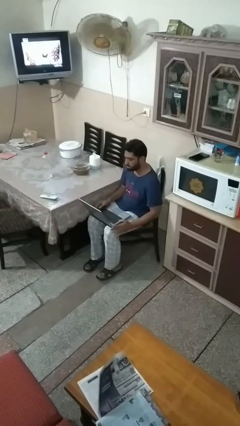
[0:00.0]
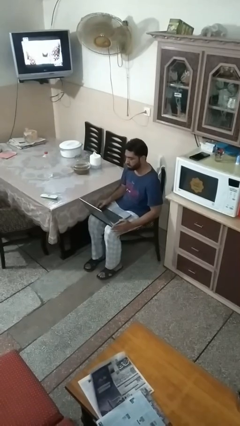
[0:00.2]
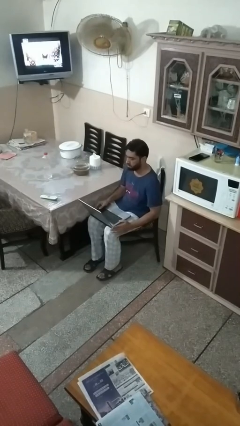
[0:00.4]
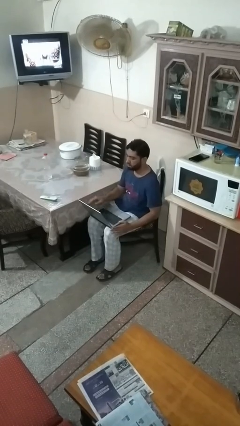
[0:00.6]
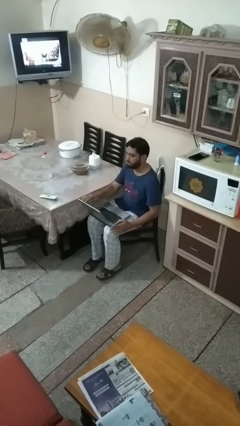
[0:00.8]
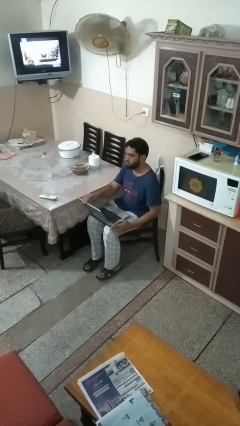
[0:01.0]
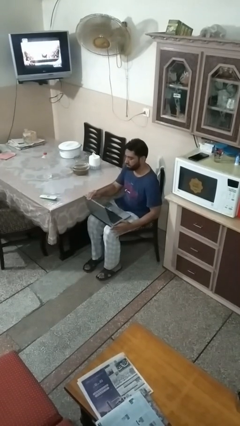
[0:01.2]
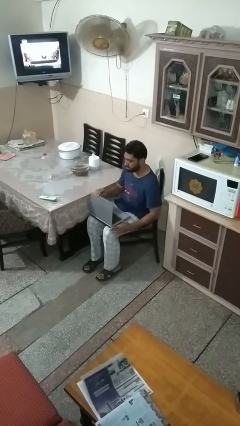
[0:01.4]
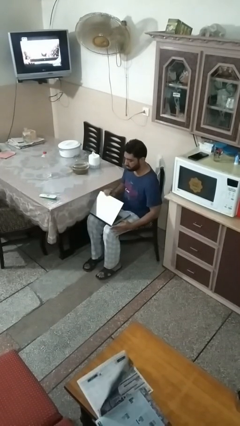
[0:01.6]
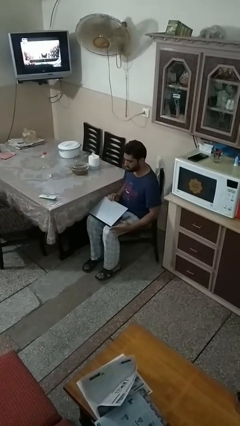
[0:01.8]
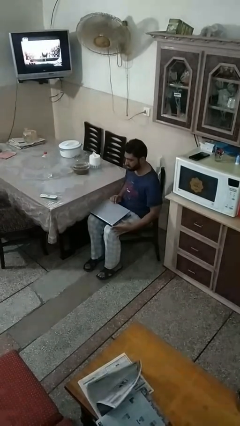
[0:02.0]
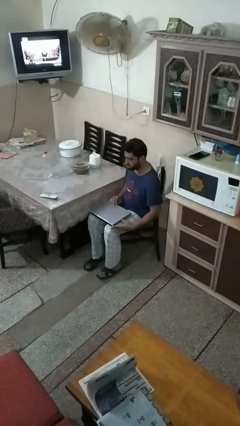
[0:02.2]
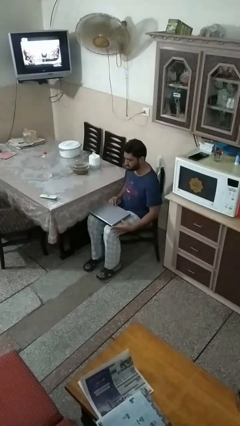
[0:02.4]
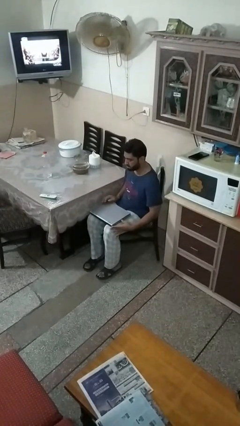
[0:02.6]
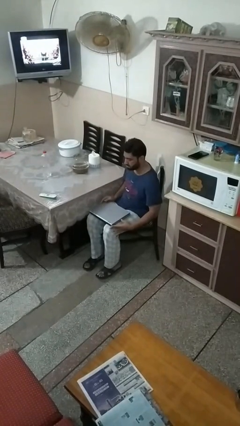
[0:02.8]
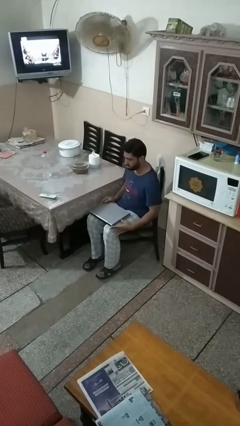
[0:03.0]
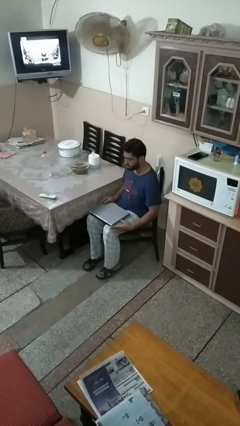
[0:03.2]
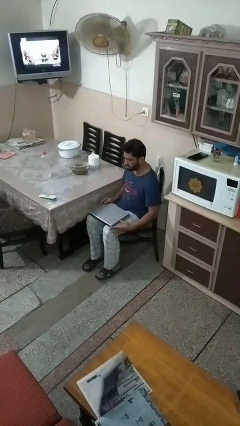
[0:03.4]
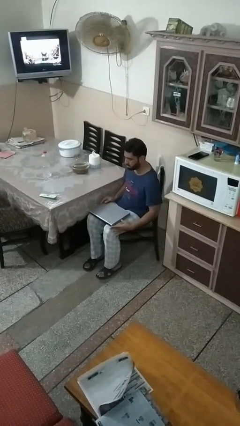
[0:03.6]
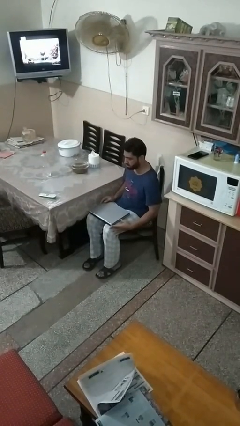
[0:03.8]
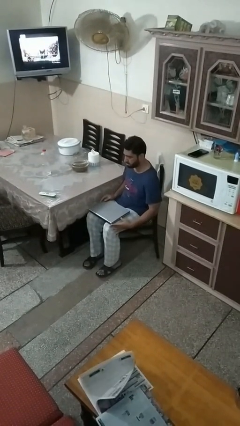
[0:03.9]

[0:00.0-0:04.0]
person closes laptop

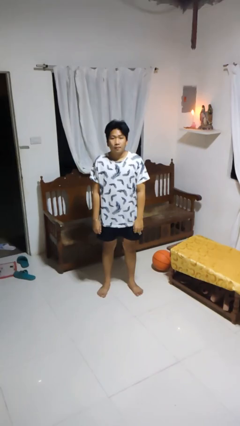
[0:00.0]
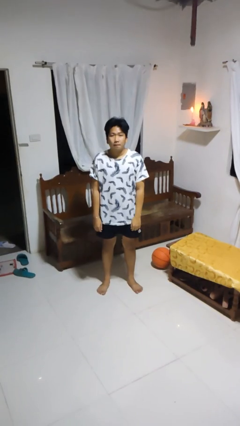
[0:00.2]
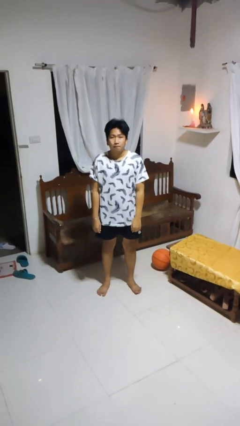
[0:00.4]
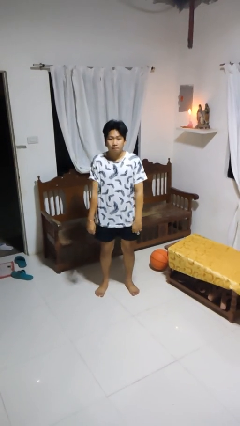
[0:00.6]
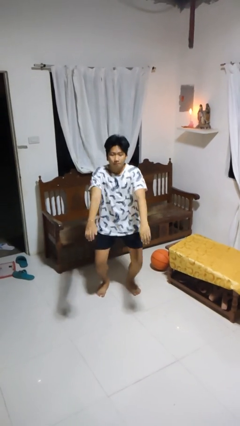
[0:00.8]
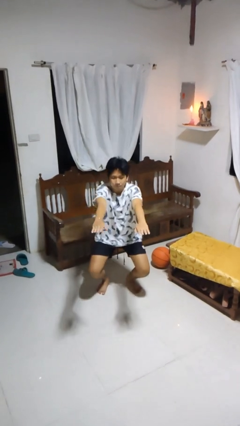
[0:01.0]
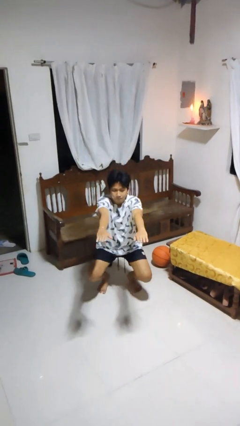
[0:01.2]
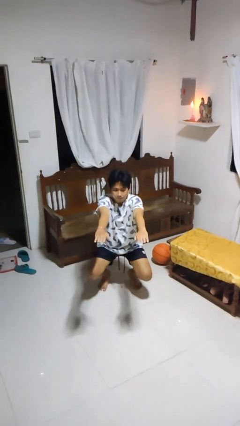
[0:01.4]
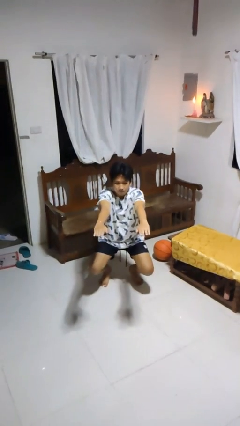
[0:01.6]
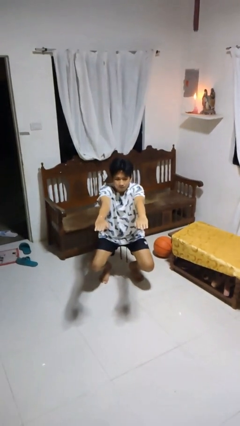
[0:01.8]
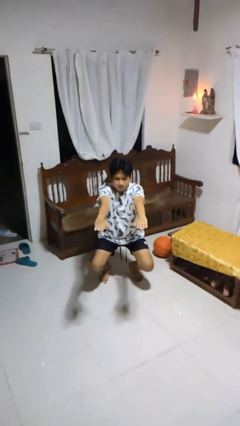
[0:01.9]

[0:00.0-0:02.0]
person squats

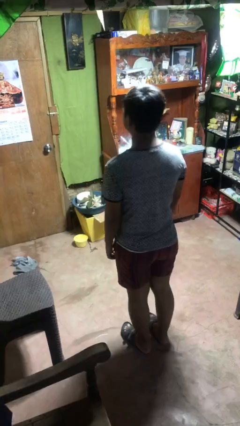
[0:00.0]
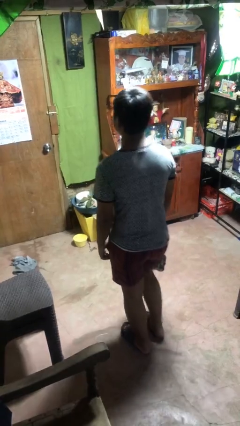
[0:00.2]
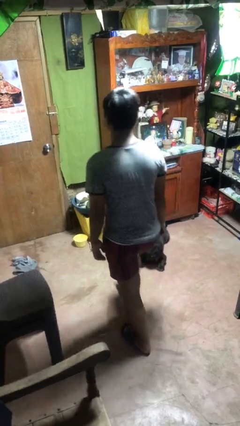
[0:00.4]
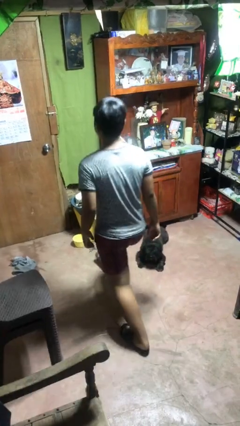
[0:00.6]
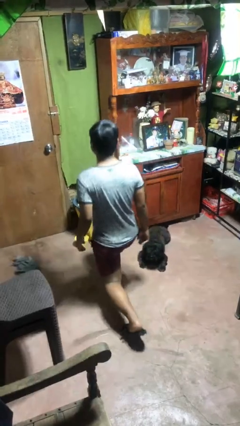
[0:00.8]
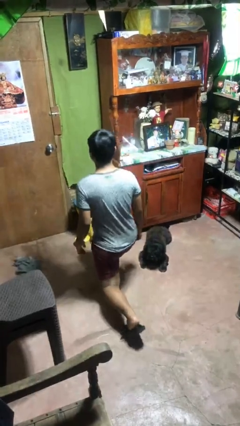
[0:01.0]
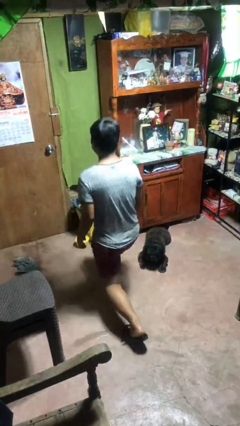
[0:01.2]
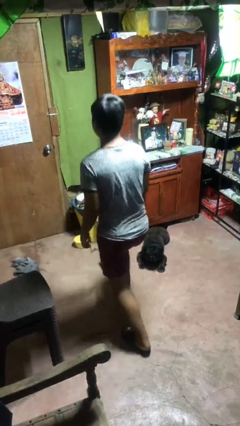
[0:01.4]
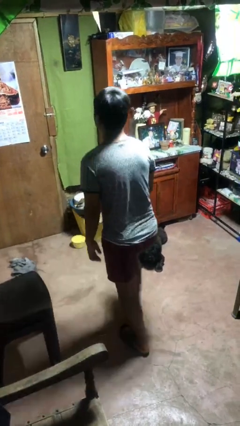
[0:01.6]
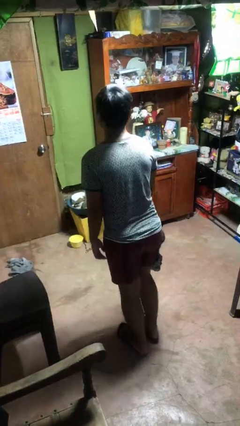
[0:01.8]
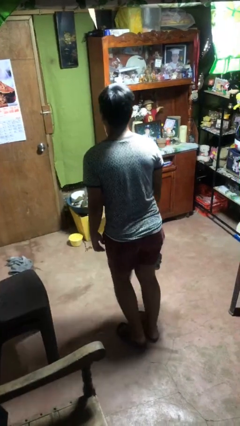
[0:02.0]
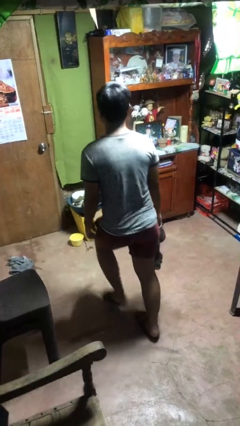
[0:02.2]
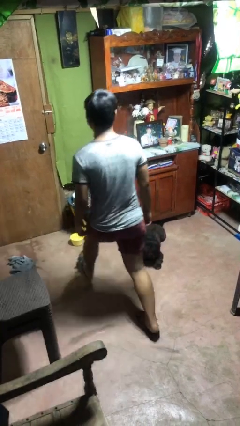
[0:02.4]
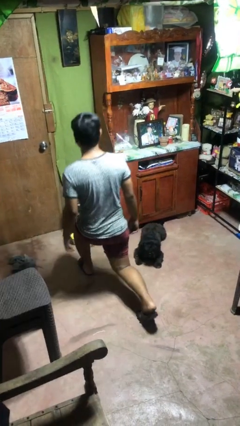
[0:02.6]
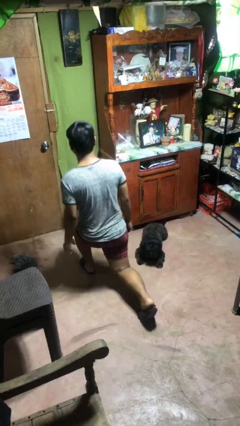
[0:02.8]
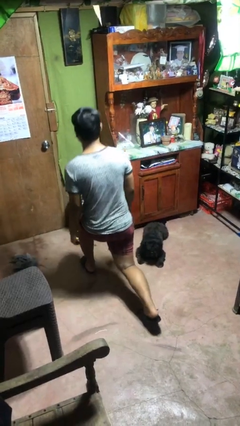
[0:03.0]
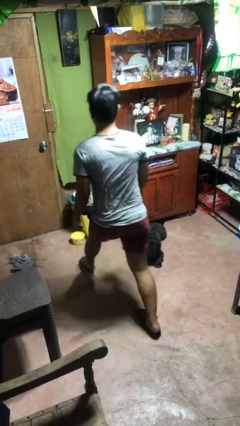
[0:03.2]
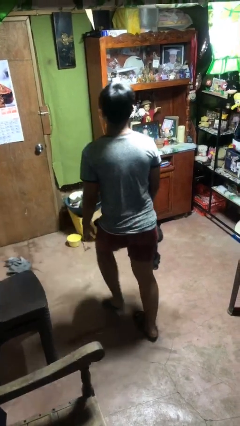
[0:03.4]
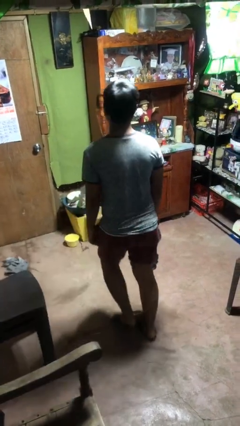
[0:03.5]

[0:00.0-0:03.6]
person exercises with lunges

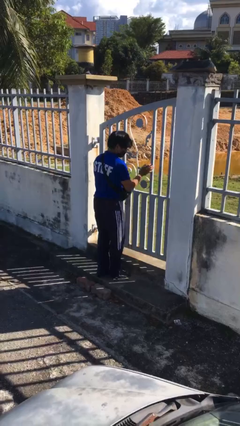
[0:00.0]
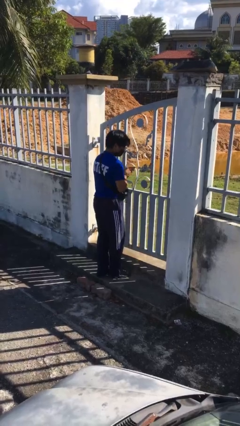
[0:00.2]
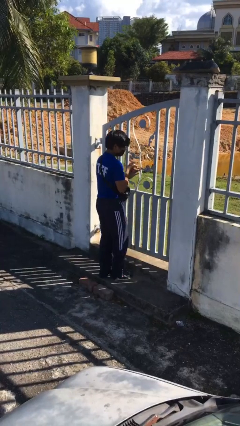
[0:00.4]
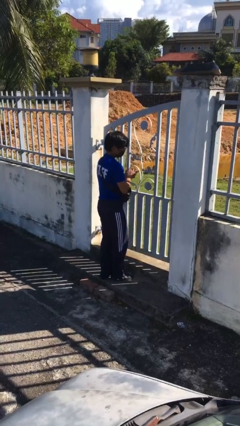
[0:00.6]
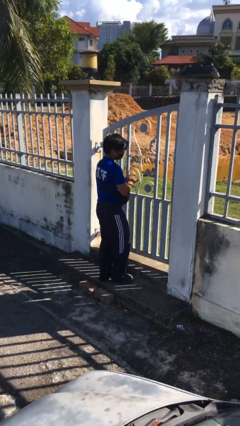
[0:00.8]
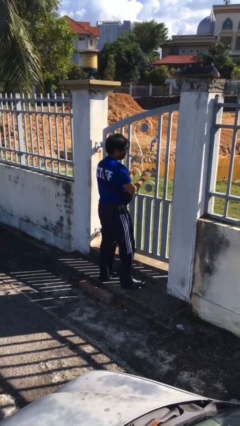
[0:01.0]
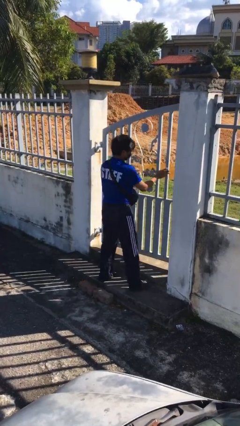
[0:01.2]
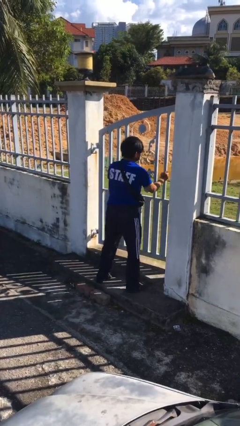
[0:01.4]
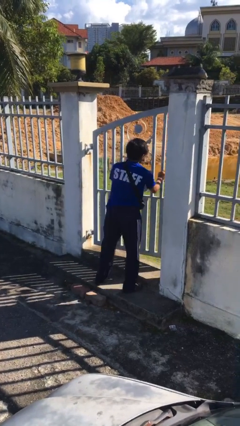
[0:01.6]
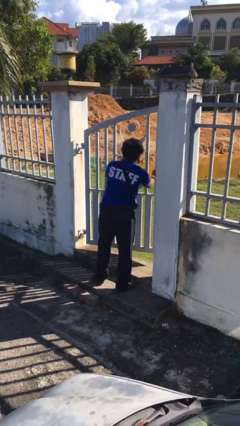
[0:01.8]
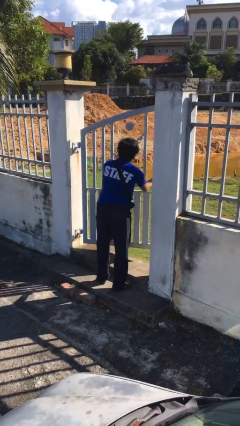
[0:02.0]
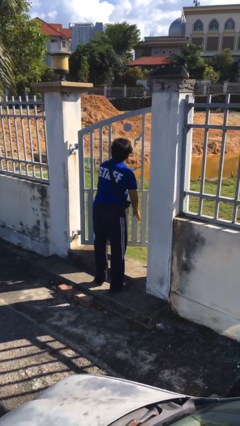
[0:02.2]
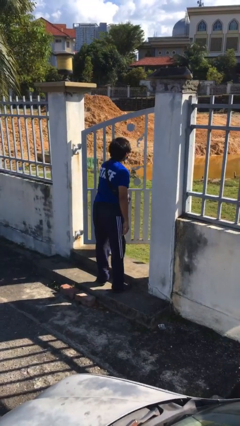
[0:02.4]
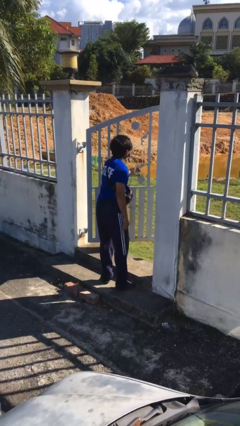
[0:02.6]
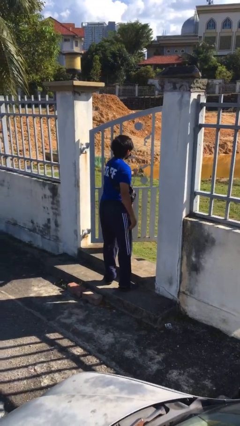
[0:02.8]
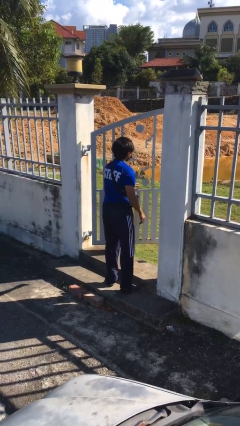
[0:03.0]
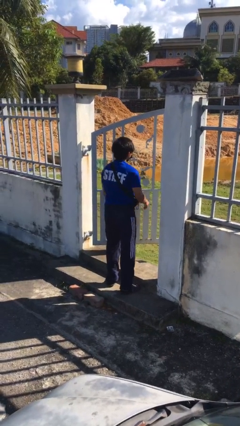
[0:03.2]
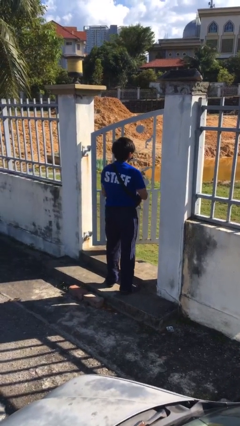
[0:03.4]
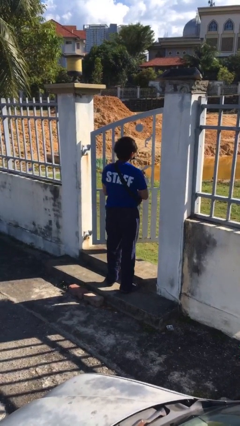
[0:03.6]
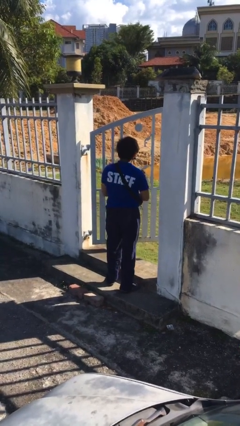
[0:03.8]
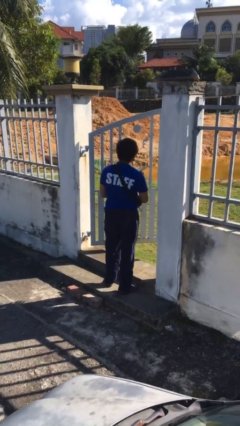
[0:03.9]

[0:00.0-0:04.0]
person opens facility door

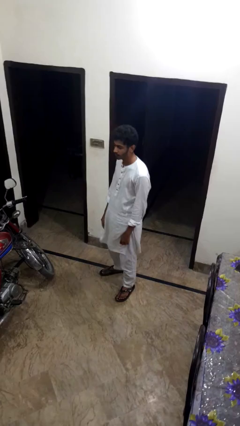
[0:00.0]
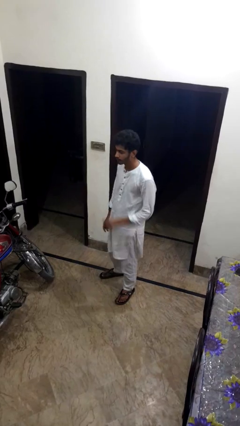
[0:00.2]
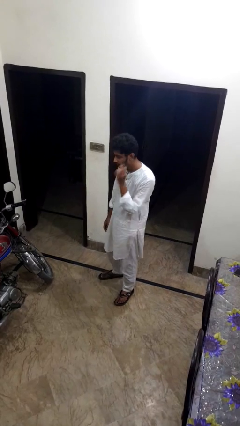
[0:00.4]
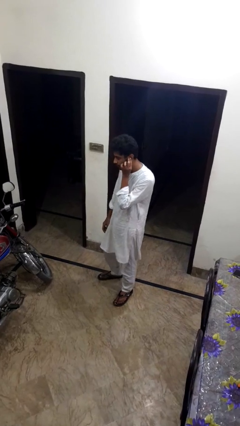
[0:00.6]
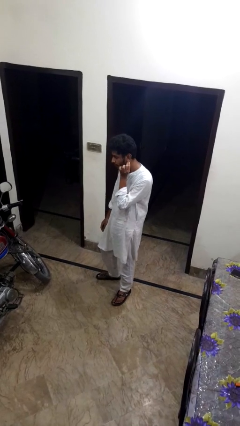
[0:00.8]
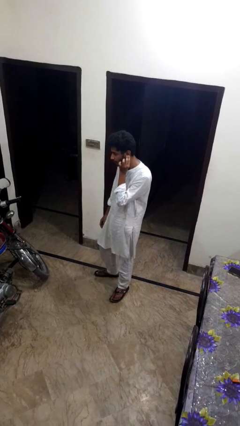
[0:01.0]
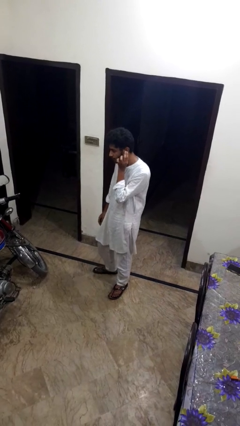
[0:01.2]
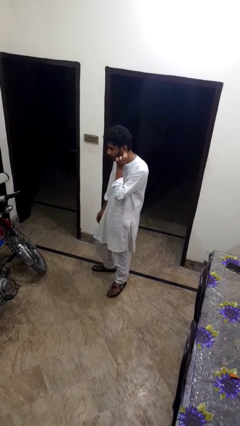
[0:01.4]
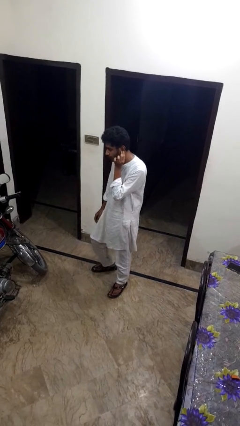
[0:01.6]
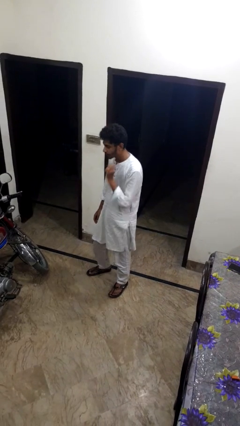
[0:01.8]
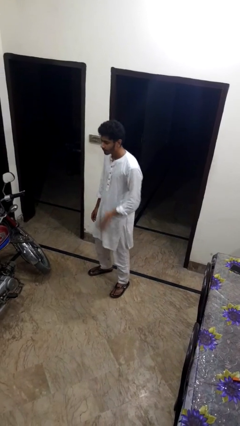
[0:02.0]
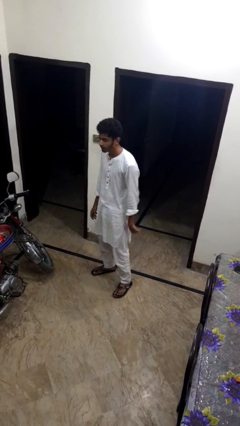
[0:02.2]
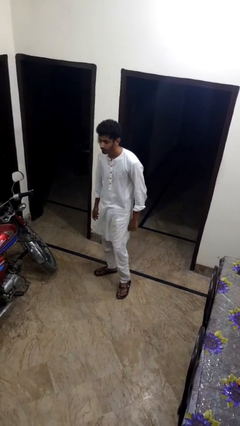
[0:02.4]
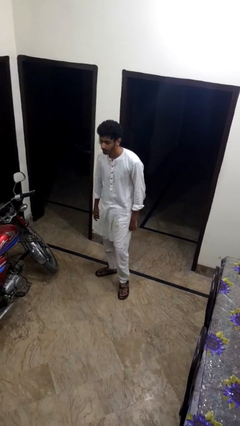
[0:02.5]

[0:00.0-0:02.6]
person touches earlobe

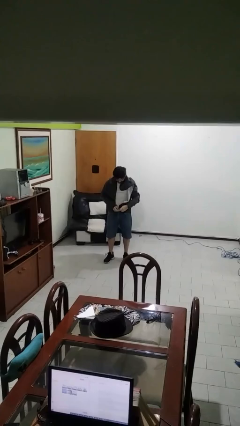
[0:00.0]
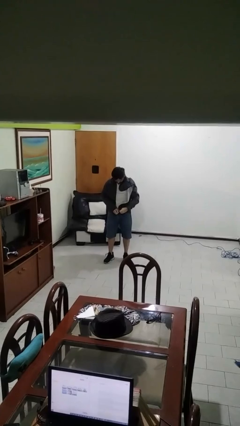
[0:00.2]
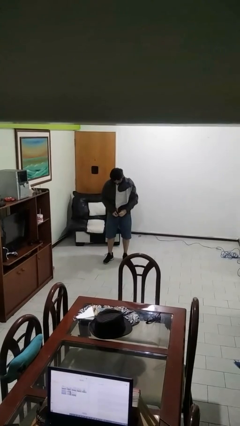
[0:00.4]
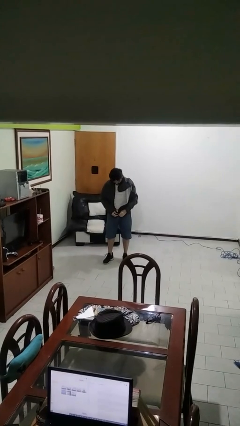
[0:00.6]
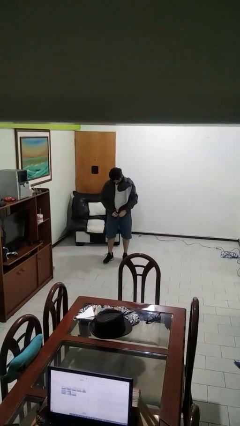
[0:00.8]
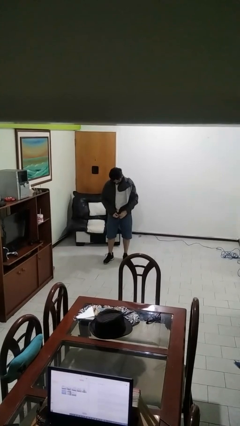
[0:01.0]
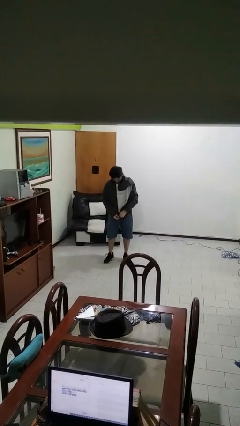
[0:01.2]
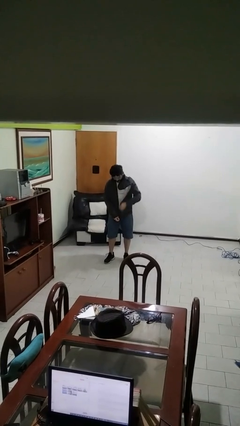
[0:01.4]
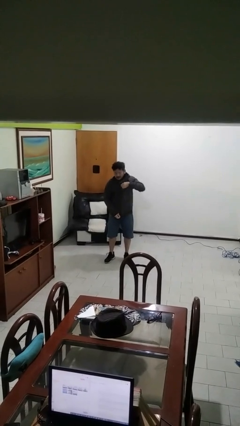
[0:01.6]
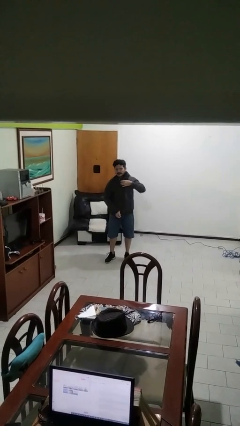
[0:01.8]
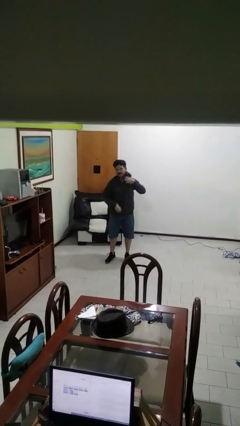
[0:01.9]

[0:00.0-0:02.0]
person zips up jacket
